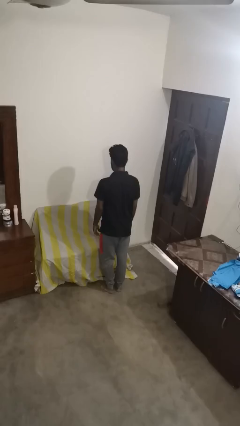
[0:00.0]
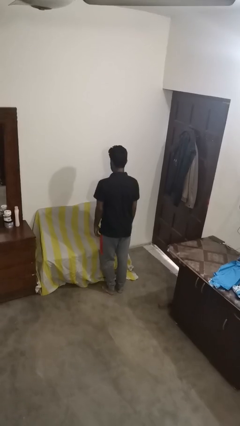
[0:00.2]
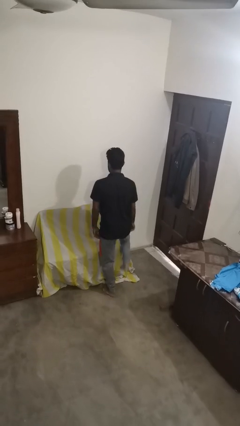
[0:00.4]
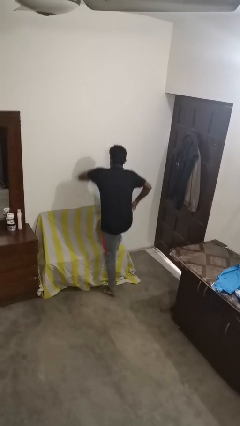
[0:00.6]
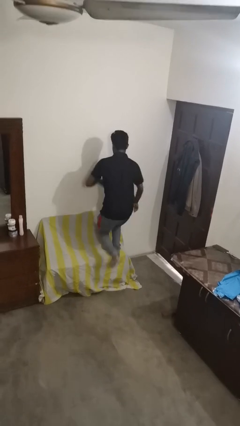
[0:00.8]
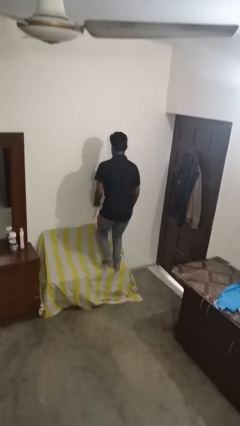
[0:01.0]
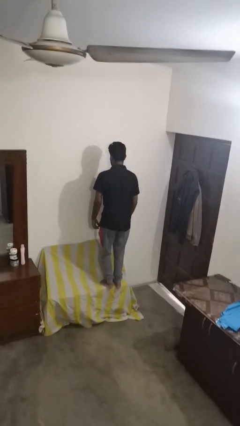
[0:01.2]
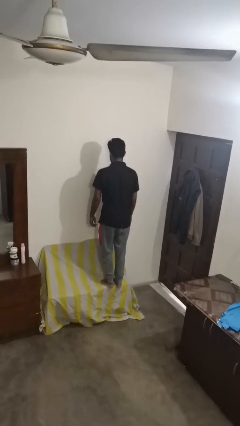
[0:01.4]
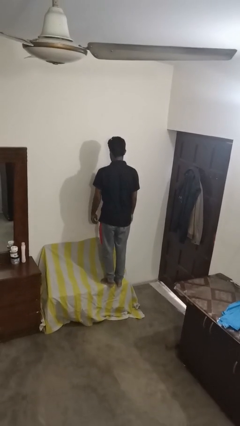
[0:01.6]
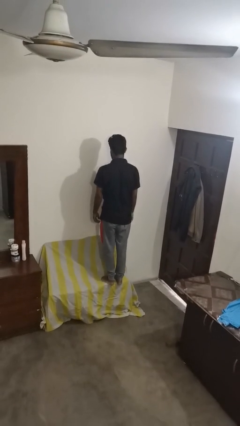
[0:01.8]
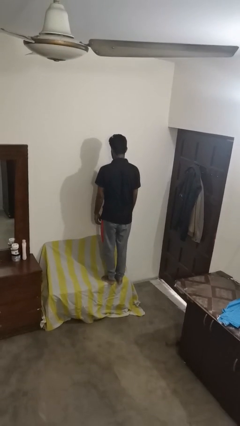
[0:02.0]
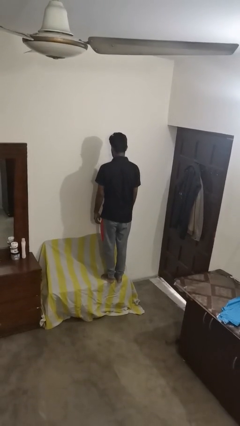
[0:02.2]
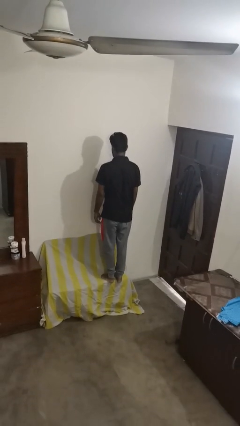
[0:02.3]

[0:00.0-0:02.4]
person jumps on couch

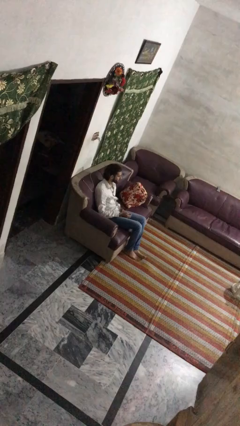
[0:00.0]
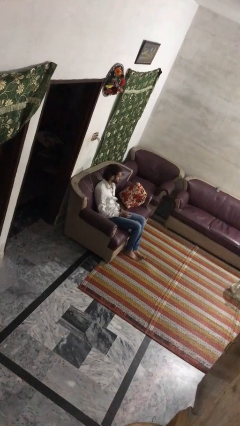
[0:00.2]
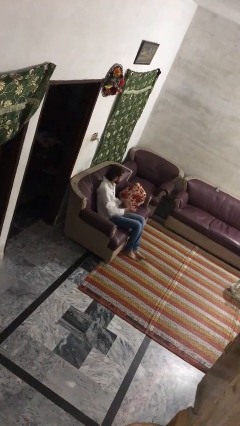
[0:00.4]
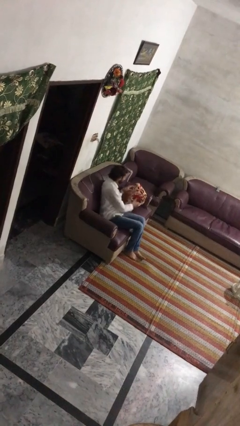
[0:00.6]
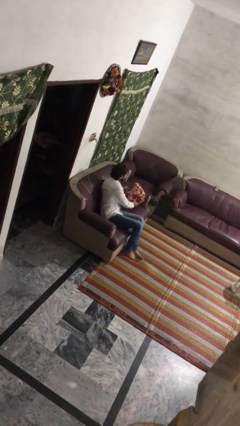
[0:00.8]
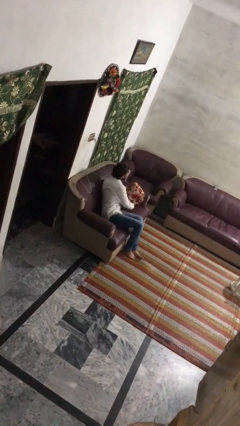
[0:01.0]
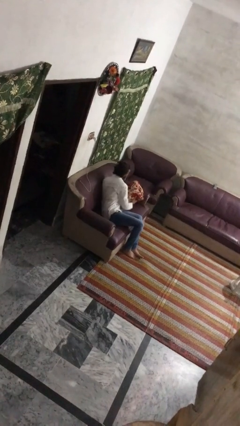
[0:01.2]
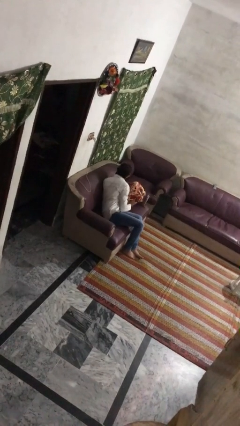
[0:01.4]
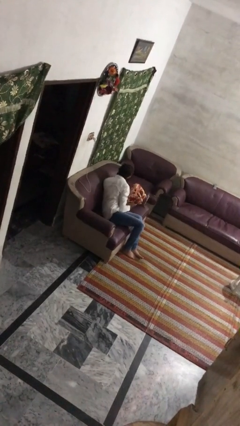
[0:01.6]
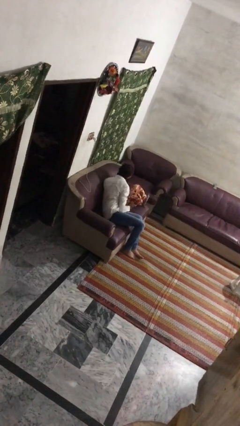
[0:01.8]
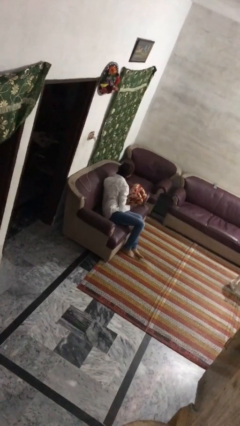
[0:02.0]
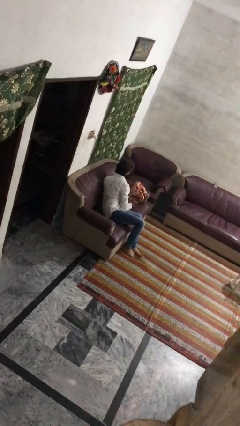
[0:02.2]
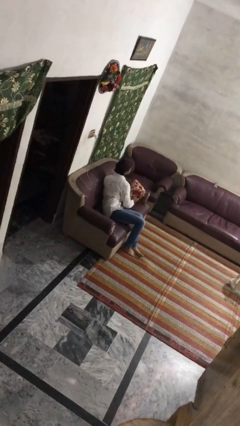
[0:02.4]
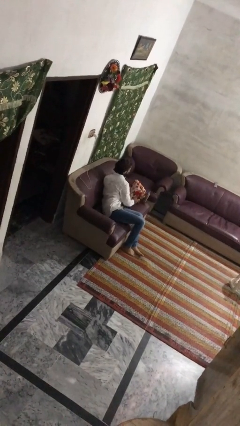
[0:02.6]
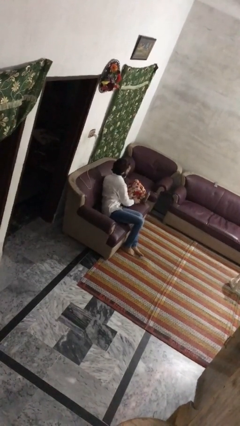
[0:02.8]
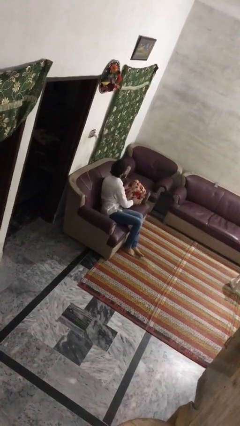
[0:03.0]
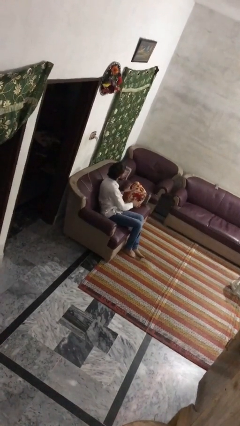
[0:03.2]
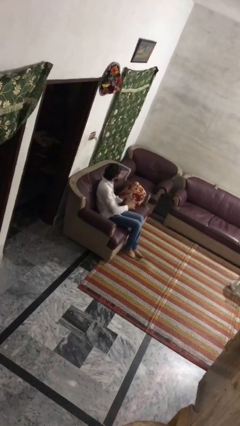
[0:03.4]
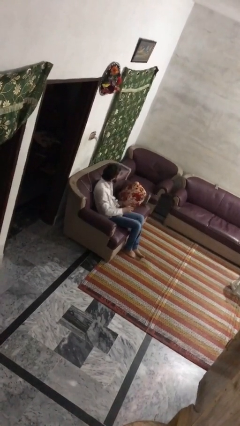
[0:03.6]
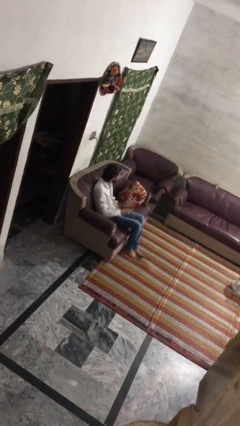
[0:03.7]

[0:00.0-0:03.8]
person searches in couch

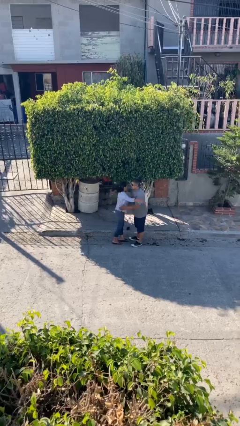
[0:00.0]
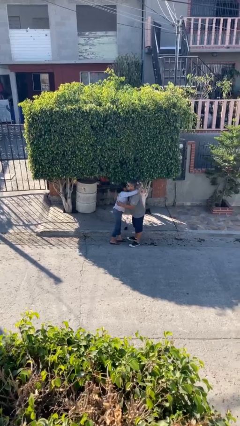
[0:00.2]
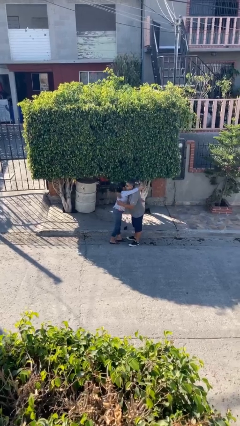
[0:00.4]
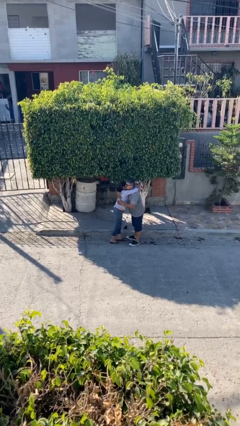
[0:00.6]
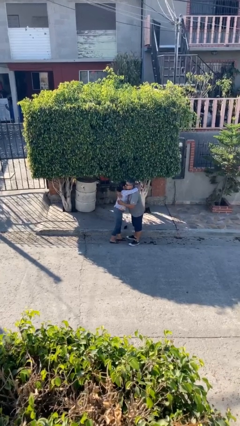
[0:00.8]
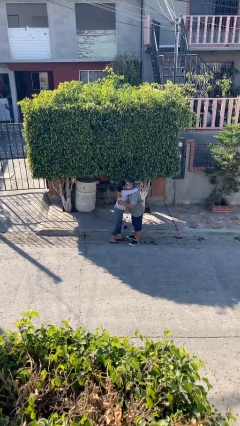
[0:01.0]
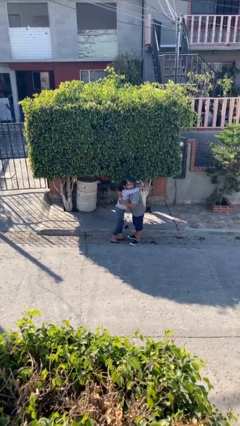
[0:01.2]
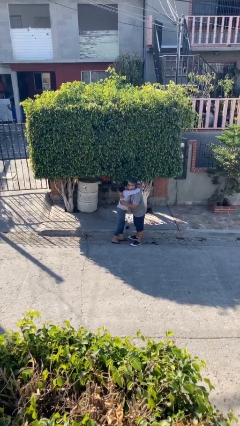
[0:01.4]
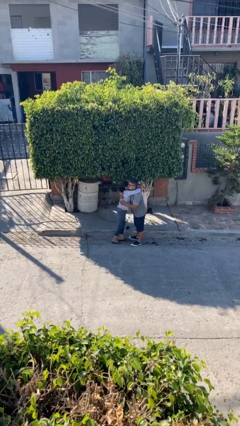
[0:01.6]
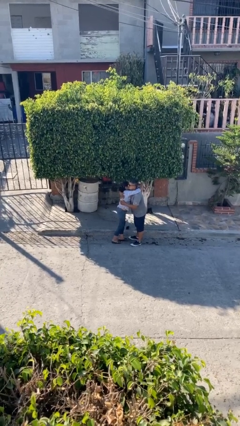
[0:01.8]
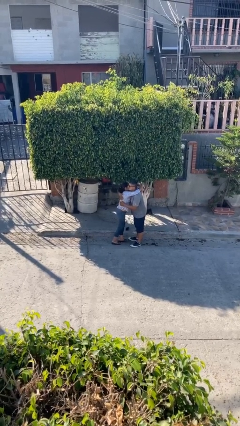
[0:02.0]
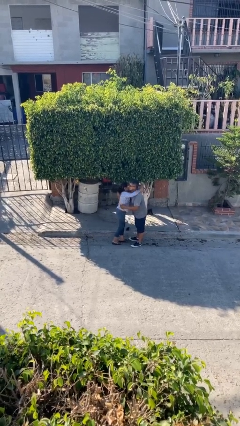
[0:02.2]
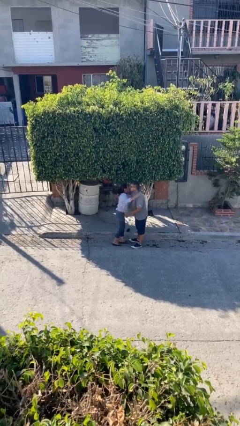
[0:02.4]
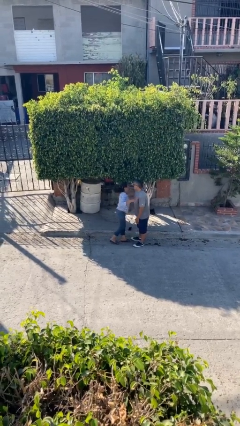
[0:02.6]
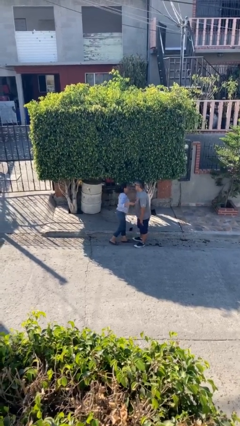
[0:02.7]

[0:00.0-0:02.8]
person embraces person

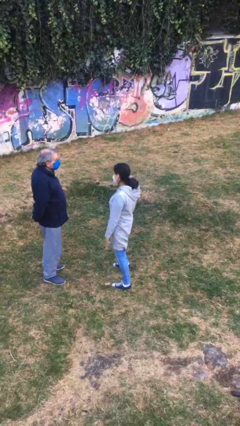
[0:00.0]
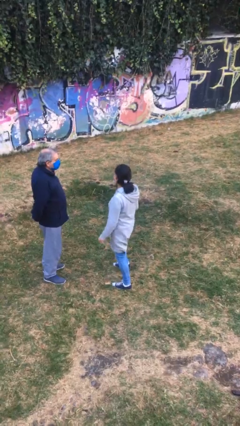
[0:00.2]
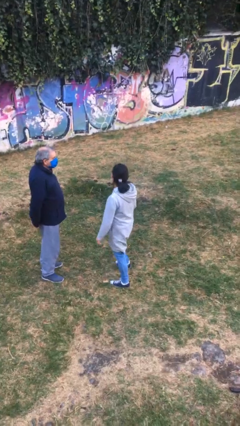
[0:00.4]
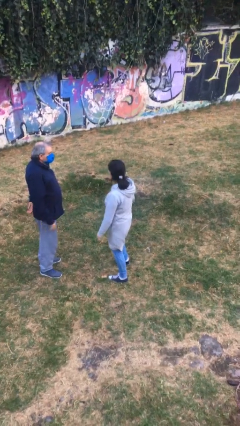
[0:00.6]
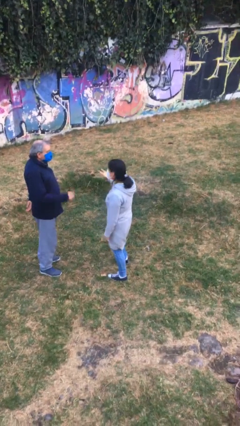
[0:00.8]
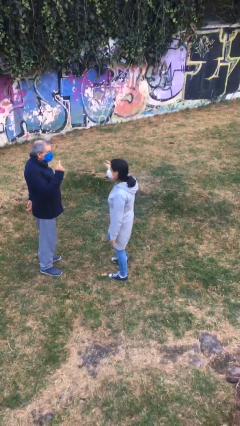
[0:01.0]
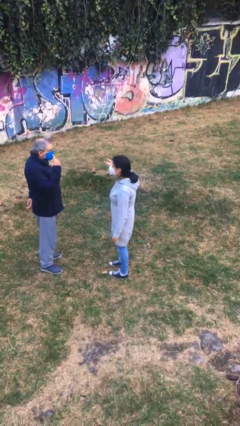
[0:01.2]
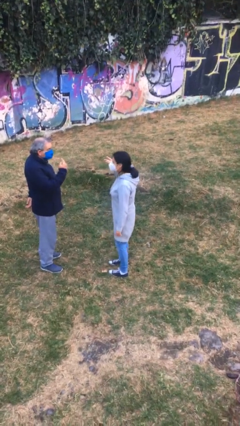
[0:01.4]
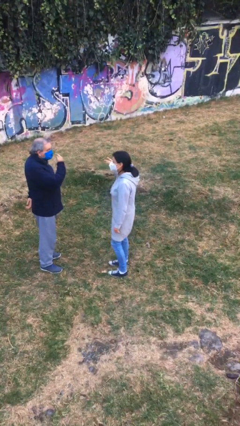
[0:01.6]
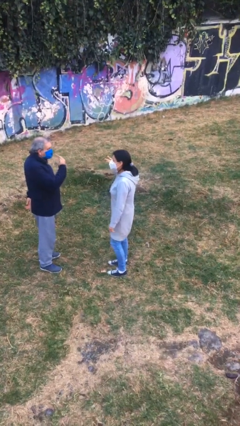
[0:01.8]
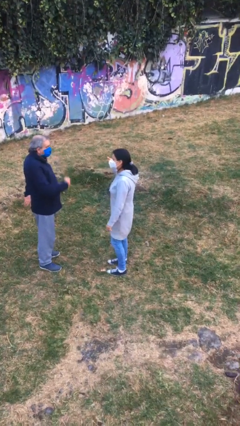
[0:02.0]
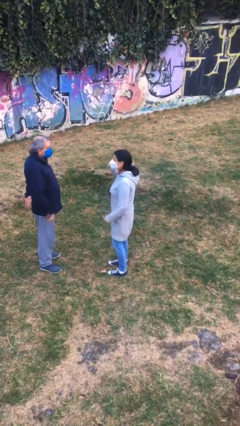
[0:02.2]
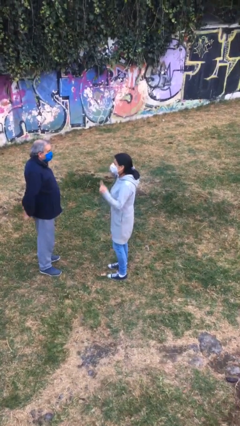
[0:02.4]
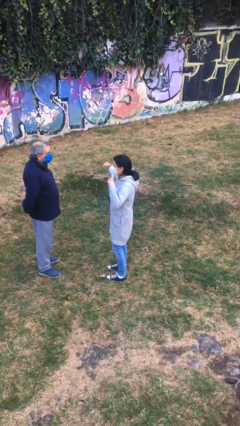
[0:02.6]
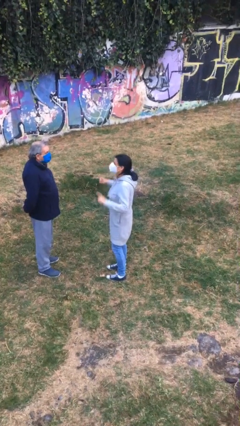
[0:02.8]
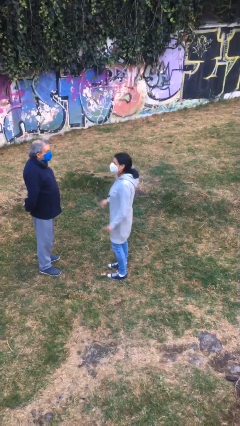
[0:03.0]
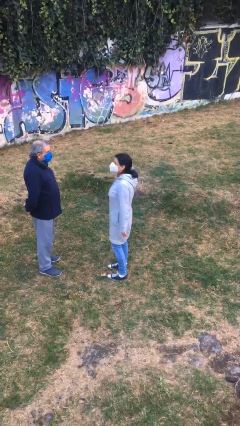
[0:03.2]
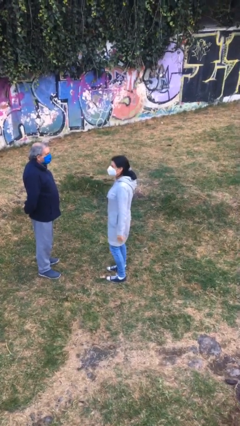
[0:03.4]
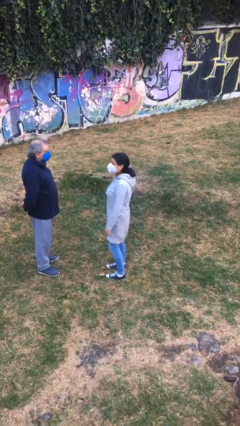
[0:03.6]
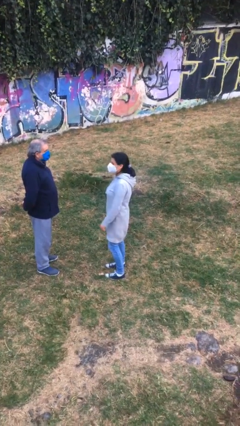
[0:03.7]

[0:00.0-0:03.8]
person talks to person

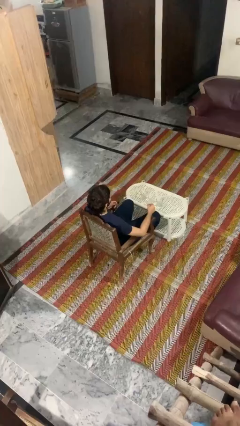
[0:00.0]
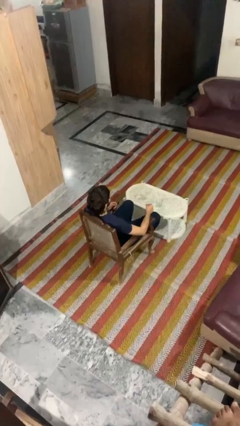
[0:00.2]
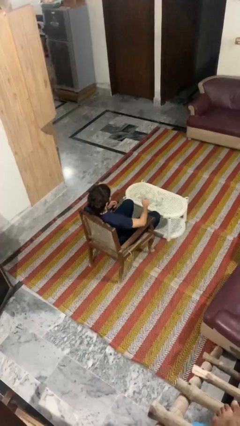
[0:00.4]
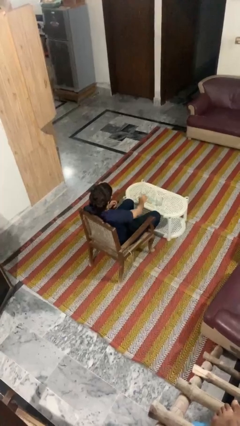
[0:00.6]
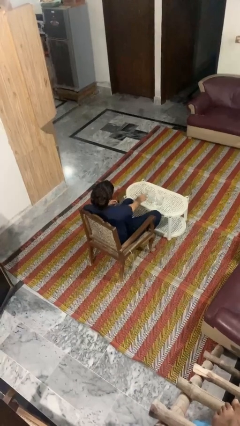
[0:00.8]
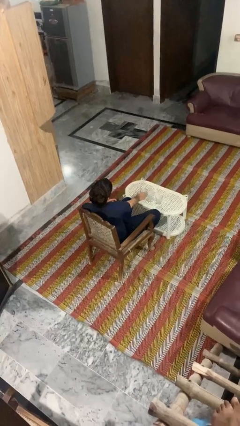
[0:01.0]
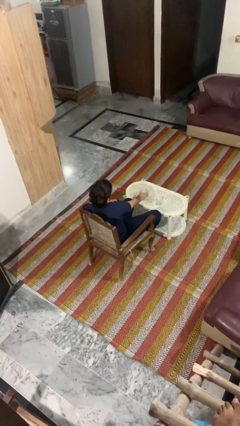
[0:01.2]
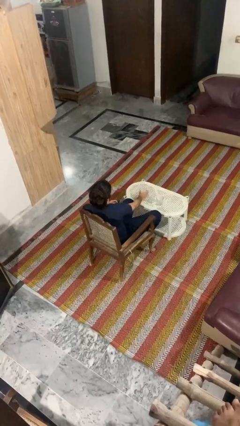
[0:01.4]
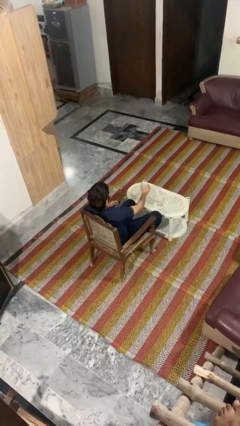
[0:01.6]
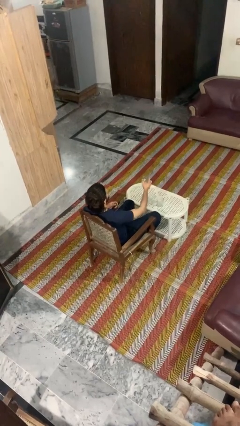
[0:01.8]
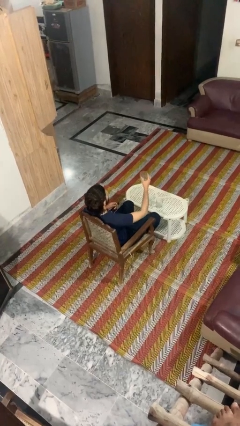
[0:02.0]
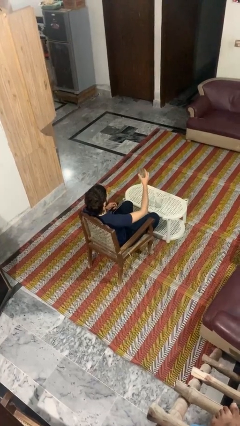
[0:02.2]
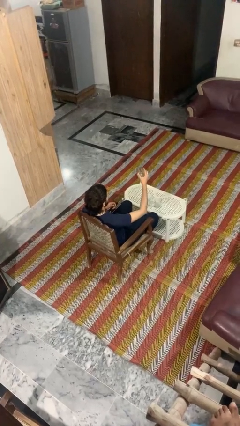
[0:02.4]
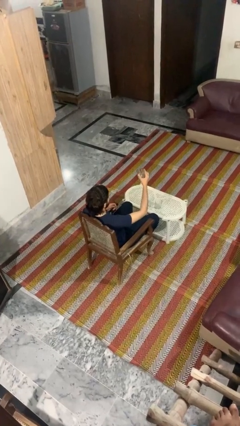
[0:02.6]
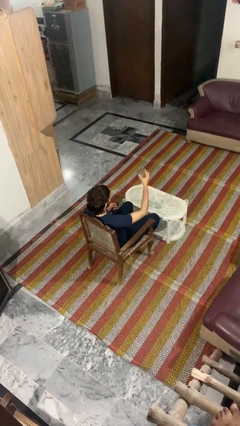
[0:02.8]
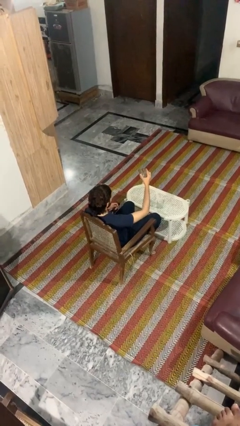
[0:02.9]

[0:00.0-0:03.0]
person picks up object from table

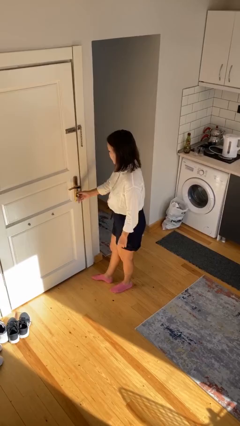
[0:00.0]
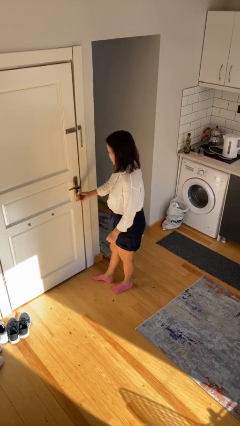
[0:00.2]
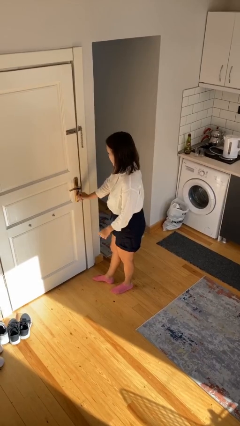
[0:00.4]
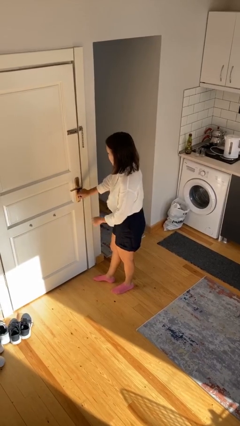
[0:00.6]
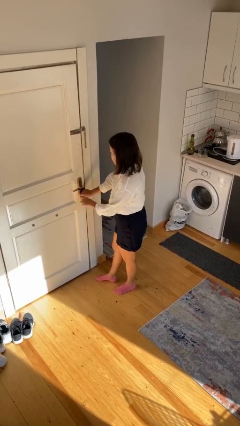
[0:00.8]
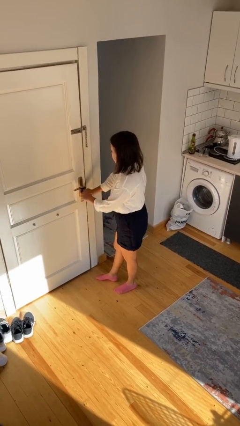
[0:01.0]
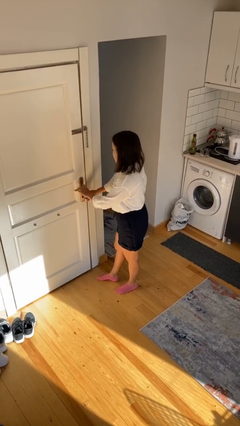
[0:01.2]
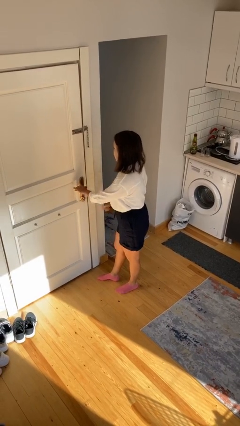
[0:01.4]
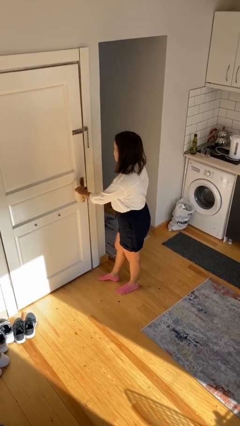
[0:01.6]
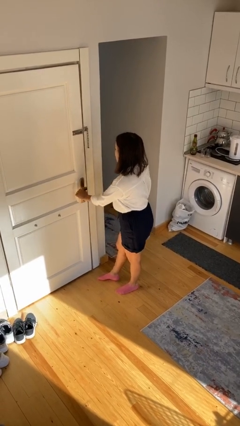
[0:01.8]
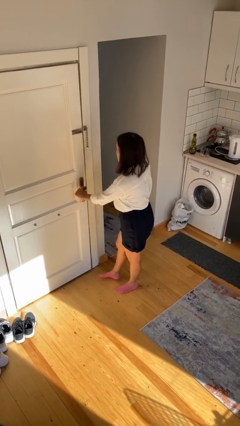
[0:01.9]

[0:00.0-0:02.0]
person unlocks door with keys
